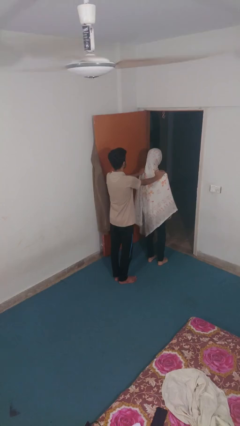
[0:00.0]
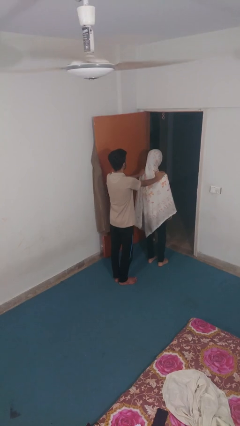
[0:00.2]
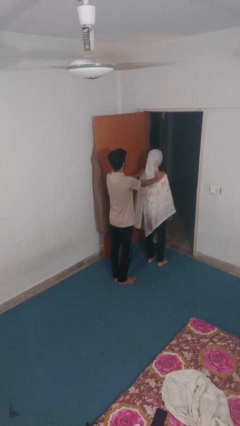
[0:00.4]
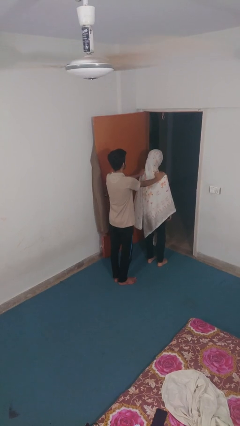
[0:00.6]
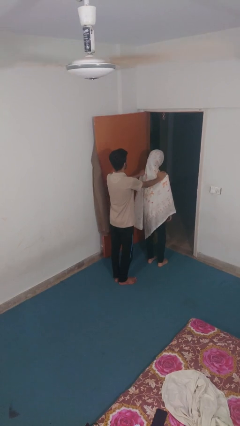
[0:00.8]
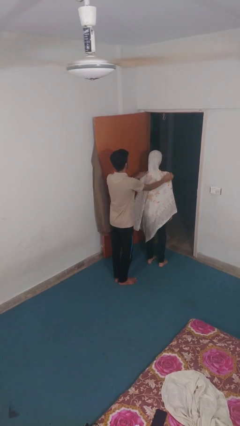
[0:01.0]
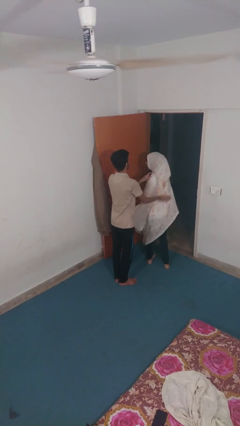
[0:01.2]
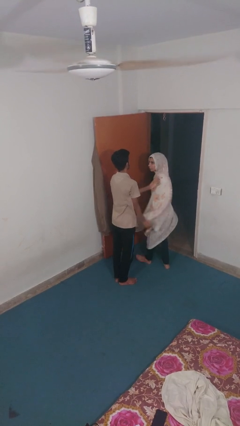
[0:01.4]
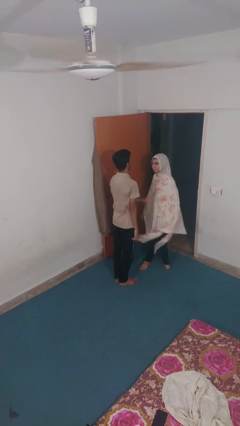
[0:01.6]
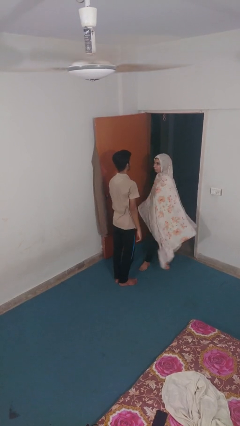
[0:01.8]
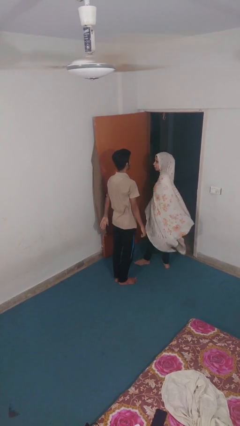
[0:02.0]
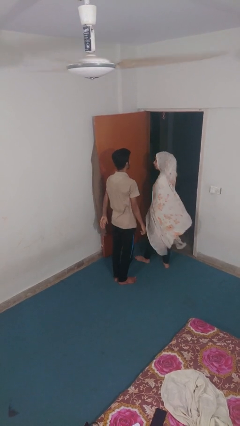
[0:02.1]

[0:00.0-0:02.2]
person spins person around

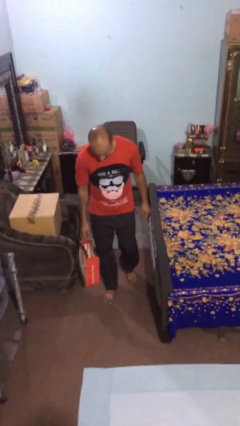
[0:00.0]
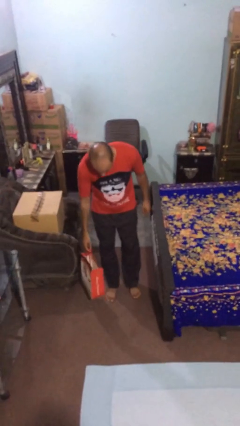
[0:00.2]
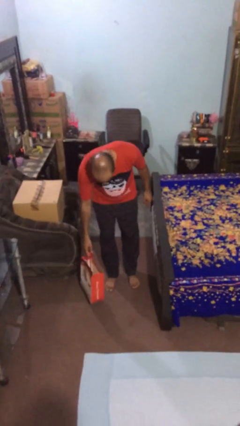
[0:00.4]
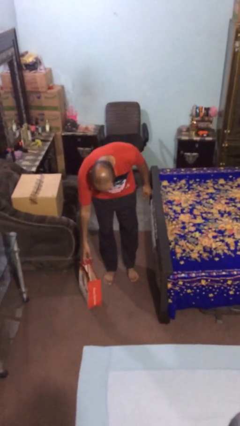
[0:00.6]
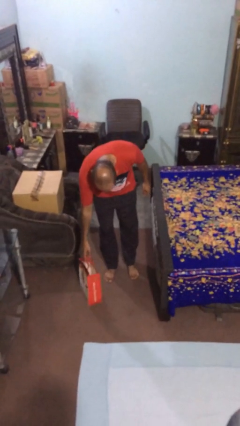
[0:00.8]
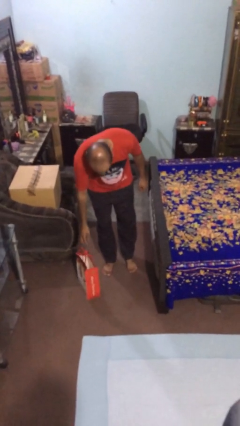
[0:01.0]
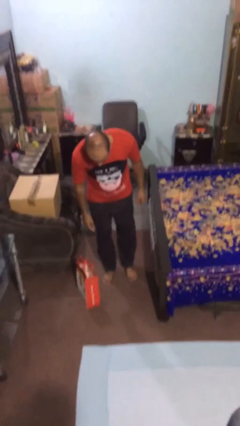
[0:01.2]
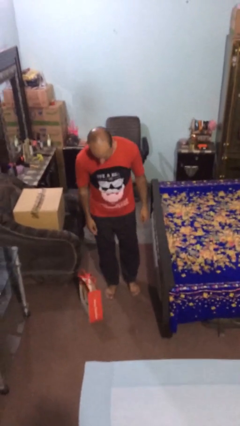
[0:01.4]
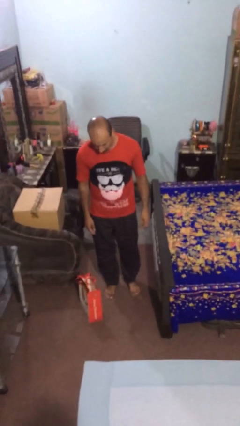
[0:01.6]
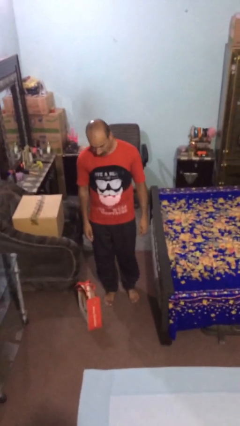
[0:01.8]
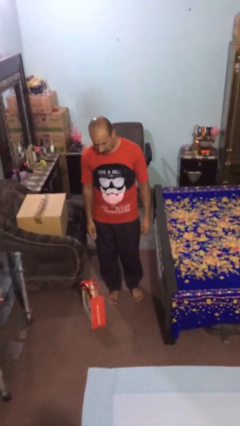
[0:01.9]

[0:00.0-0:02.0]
person puts down object on floor

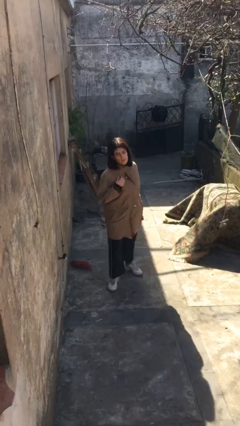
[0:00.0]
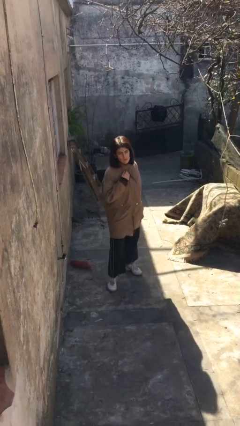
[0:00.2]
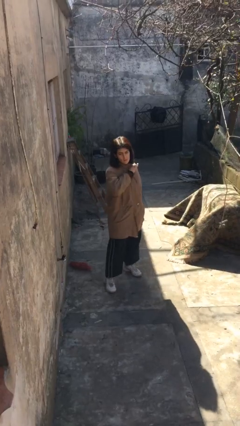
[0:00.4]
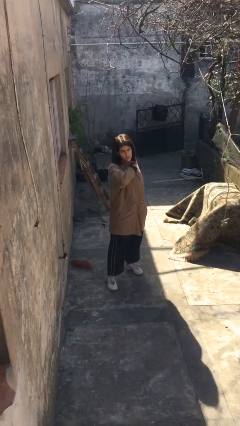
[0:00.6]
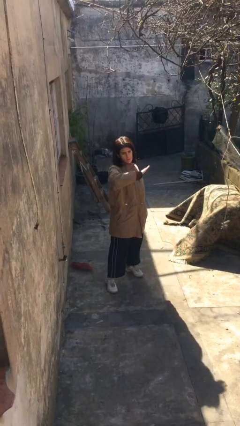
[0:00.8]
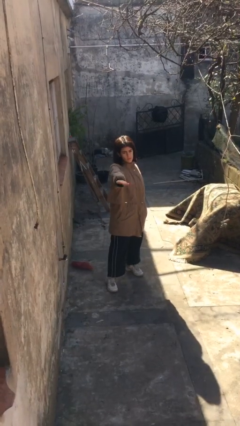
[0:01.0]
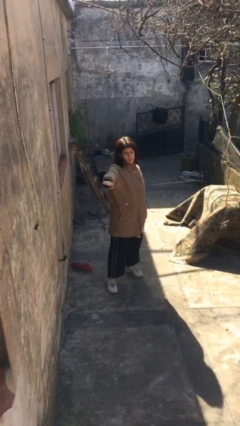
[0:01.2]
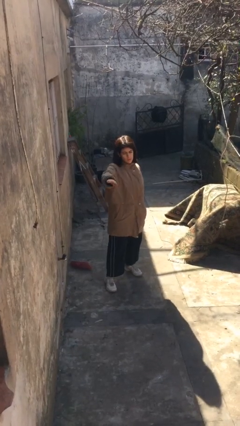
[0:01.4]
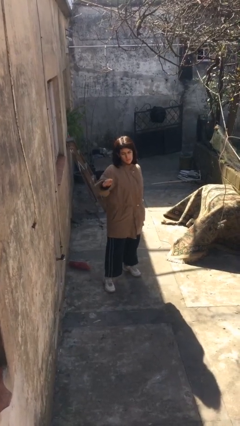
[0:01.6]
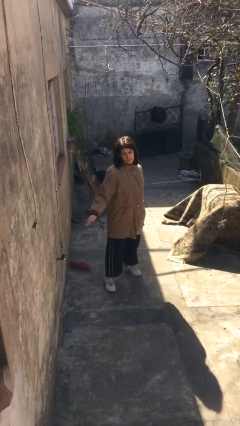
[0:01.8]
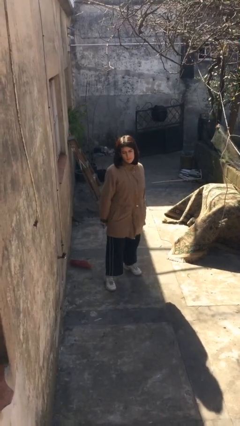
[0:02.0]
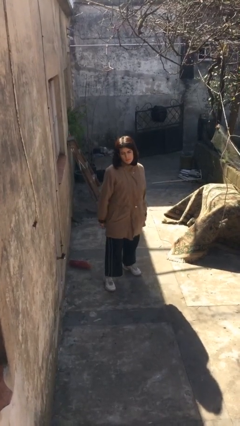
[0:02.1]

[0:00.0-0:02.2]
person karate chop

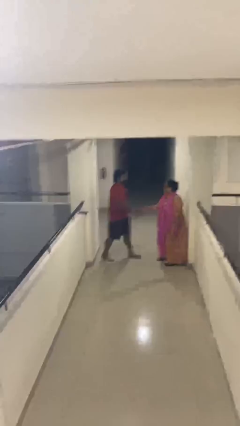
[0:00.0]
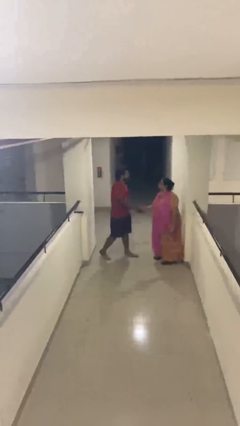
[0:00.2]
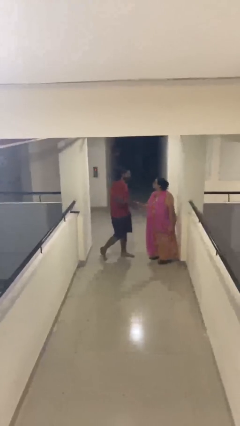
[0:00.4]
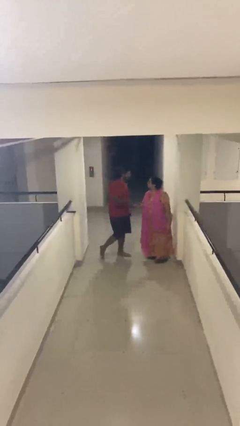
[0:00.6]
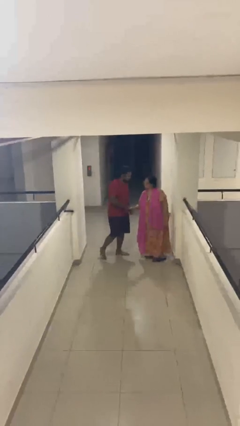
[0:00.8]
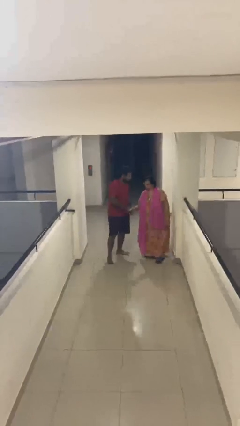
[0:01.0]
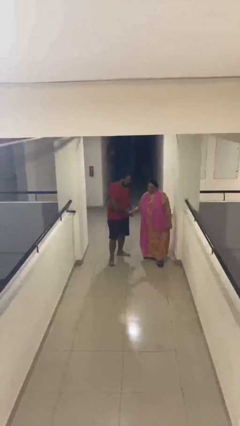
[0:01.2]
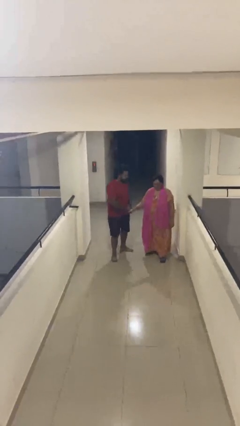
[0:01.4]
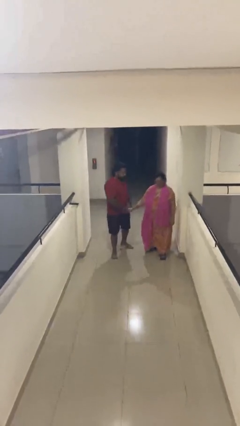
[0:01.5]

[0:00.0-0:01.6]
person shakes hand

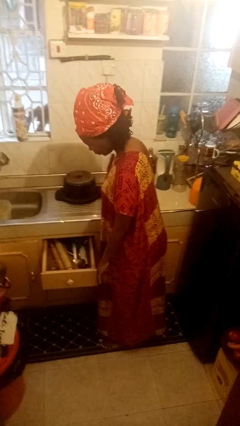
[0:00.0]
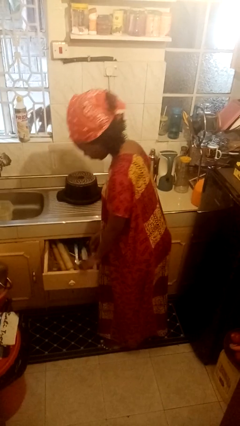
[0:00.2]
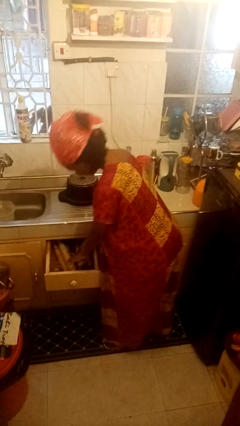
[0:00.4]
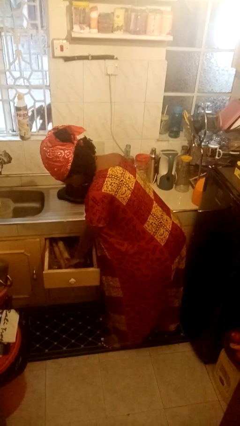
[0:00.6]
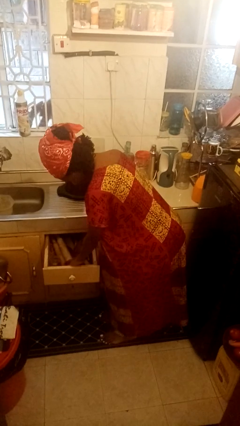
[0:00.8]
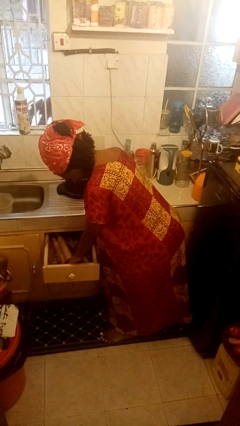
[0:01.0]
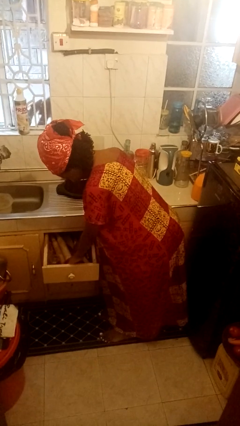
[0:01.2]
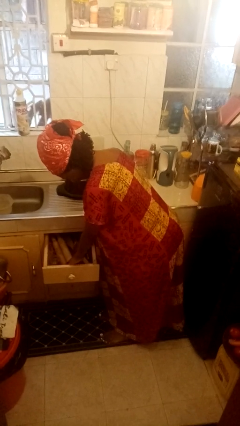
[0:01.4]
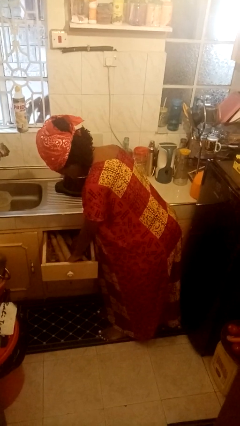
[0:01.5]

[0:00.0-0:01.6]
person searches in kitchen drawer

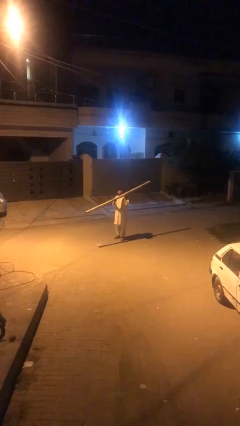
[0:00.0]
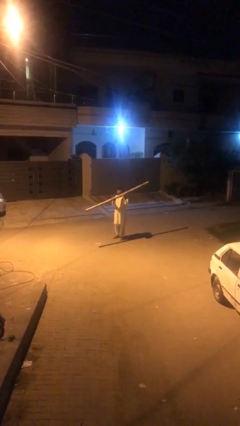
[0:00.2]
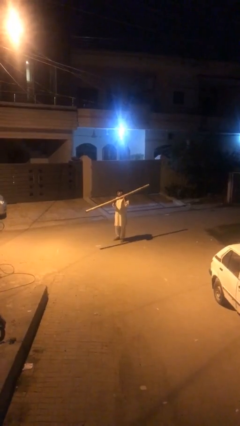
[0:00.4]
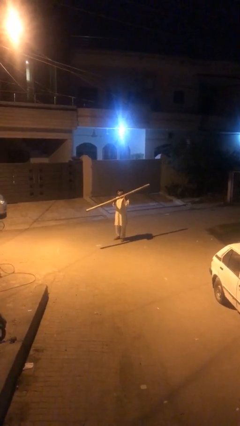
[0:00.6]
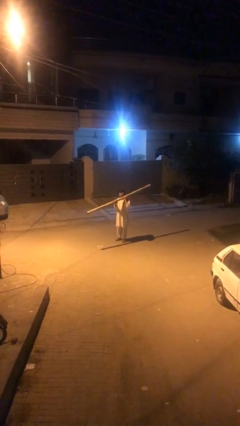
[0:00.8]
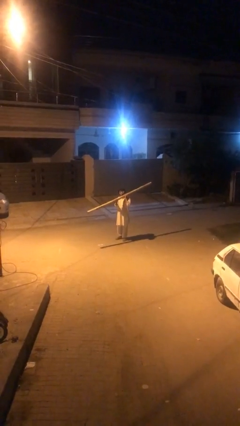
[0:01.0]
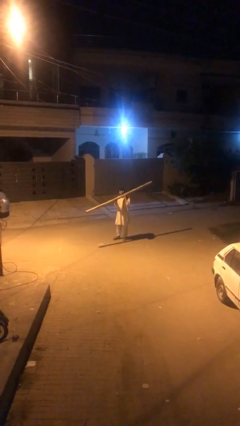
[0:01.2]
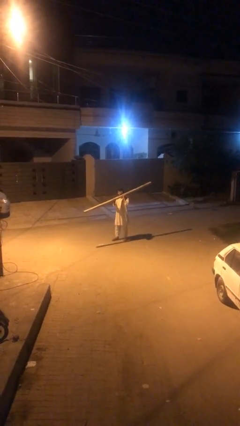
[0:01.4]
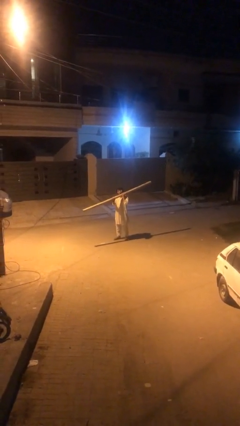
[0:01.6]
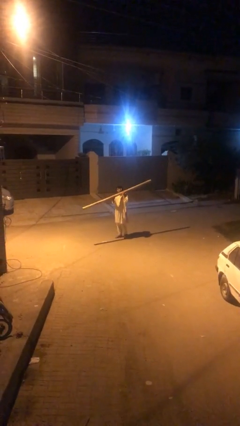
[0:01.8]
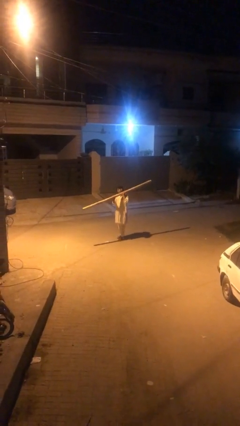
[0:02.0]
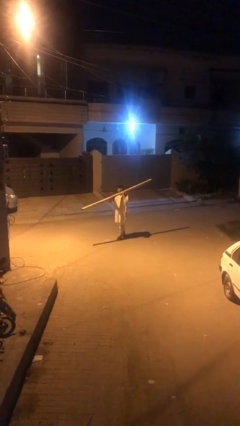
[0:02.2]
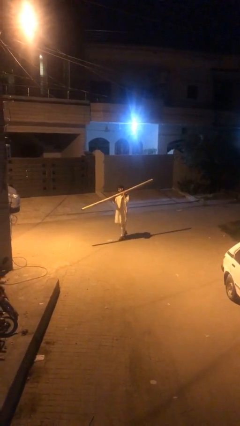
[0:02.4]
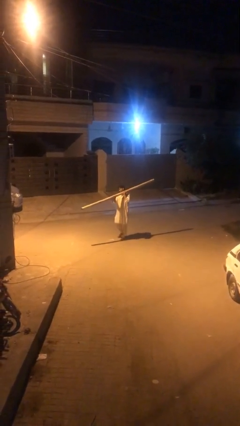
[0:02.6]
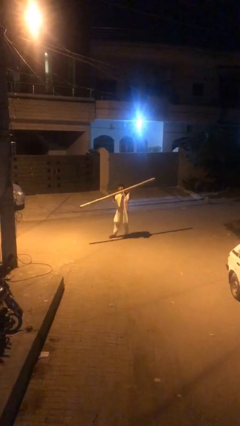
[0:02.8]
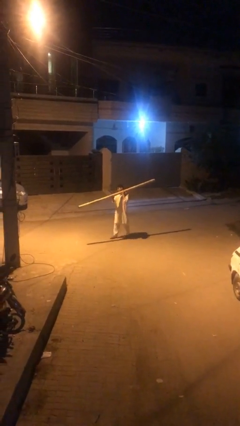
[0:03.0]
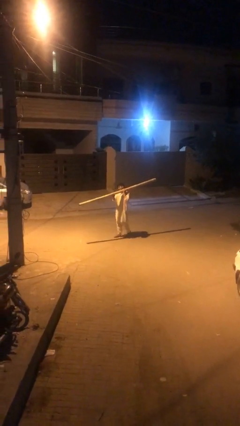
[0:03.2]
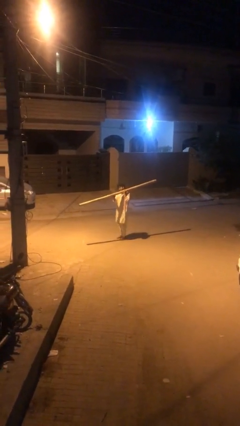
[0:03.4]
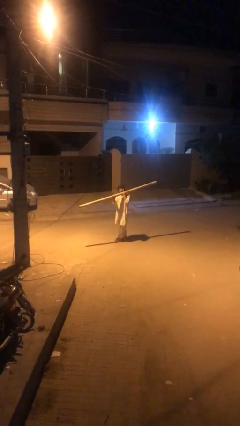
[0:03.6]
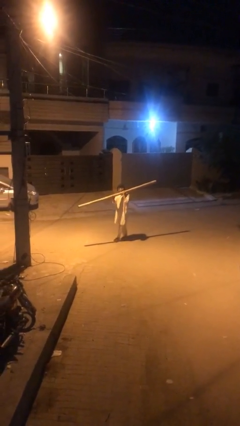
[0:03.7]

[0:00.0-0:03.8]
person carries heavy object

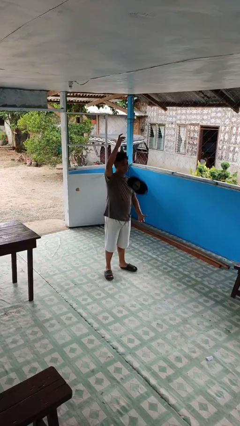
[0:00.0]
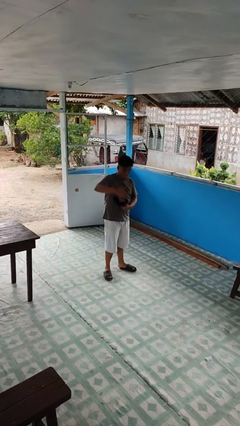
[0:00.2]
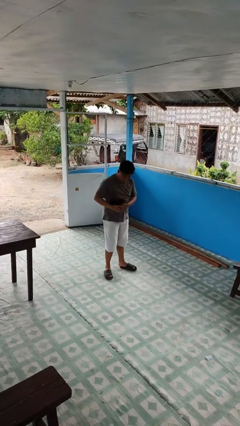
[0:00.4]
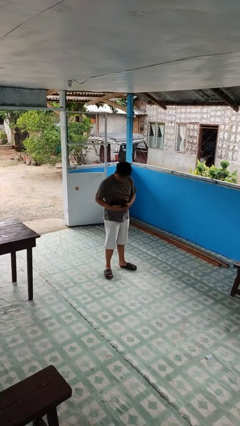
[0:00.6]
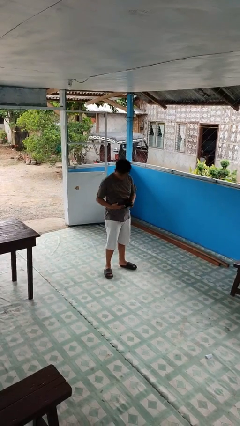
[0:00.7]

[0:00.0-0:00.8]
person catches dropped object

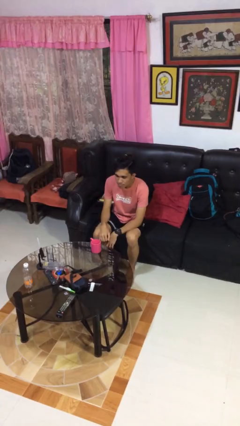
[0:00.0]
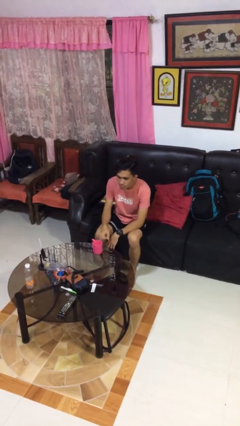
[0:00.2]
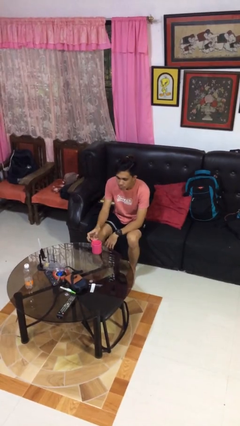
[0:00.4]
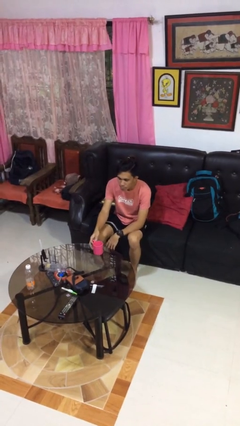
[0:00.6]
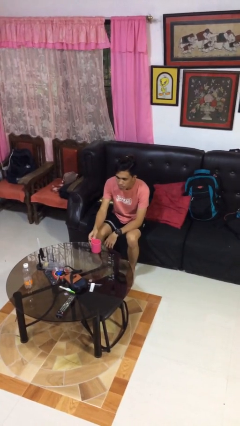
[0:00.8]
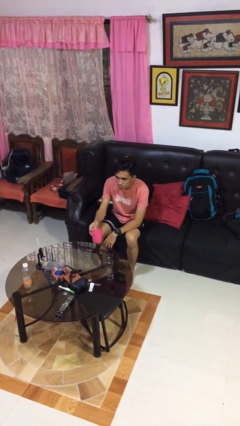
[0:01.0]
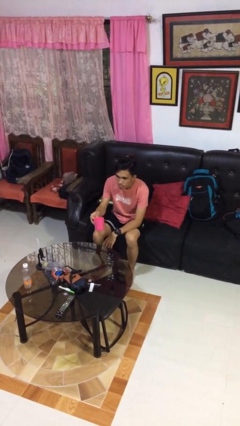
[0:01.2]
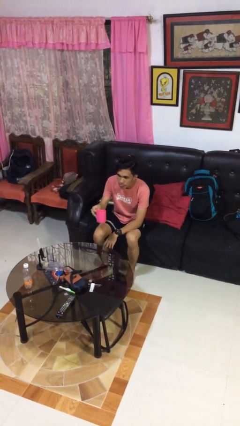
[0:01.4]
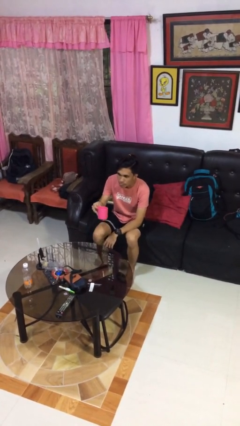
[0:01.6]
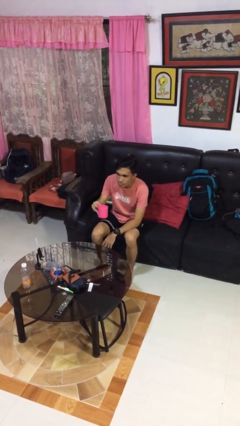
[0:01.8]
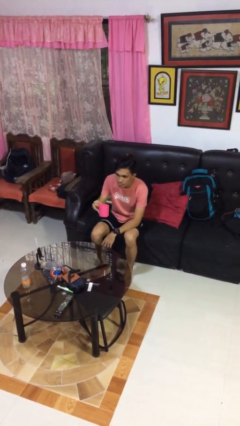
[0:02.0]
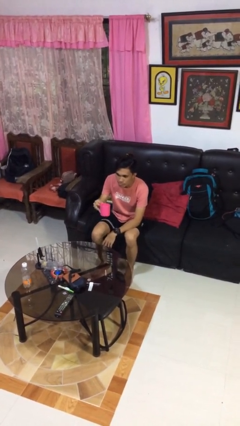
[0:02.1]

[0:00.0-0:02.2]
person picks up object from table

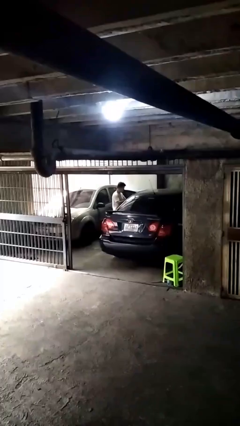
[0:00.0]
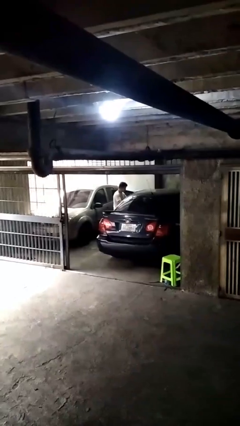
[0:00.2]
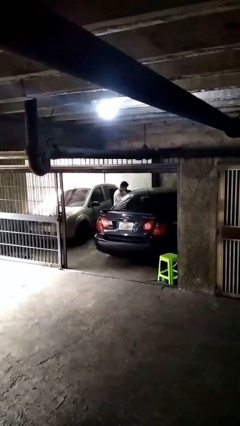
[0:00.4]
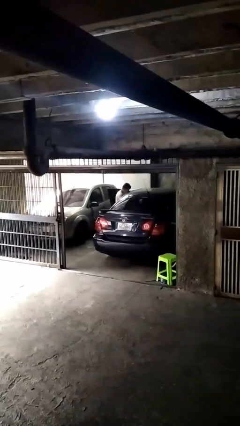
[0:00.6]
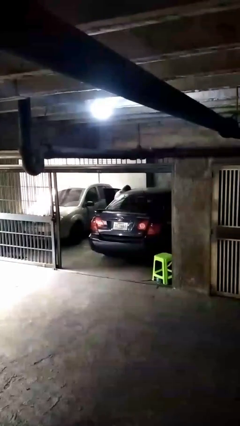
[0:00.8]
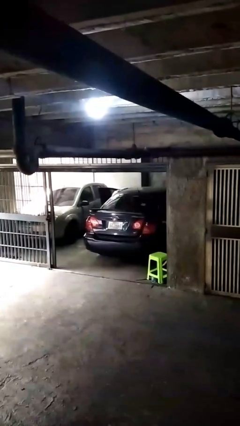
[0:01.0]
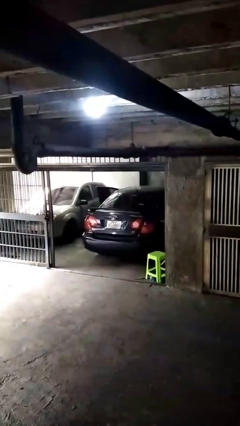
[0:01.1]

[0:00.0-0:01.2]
person loads car
